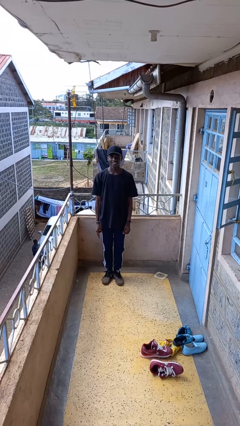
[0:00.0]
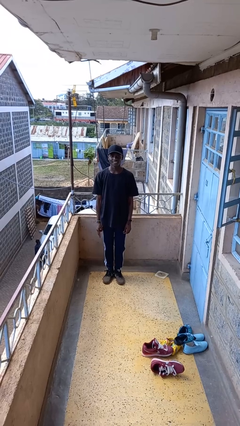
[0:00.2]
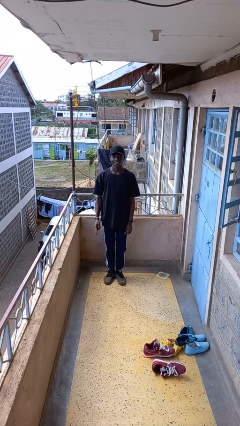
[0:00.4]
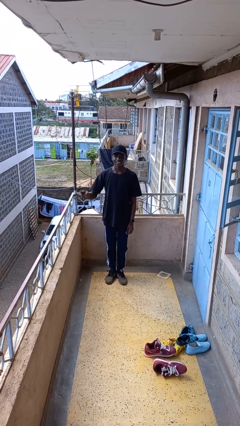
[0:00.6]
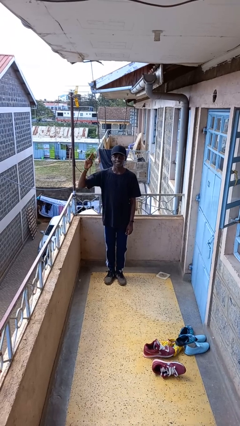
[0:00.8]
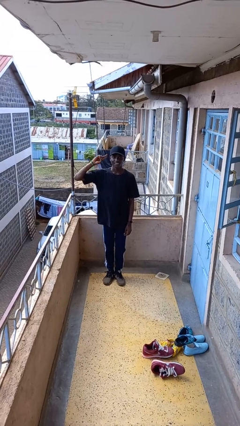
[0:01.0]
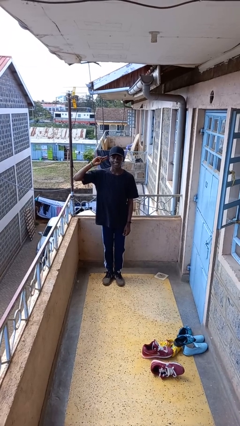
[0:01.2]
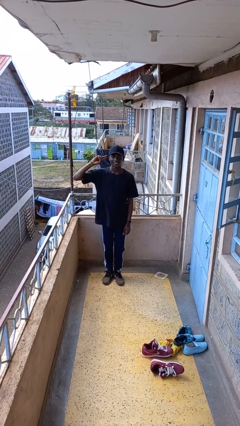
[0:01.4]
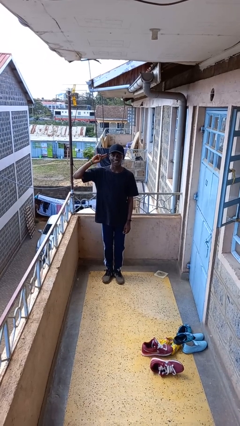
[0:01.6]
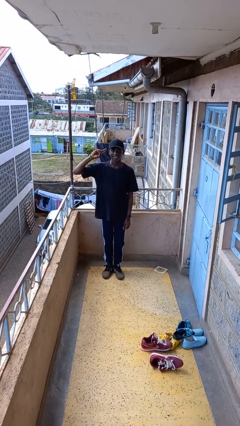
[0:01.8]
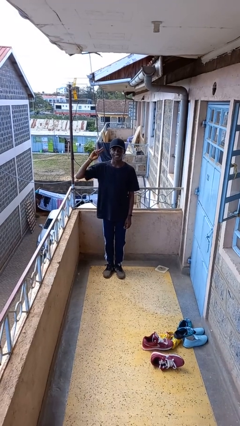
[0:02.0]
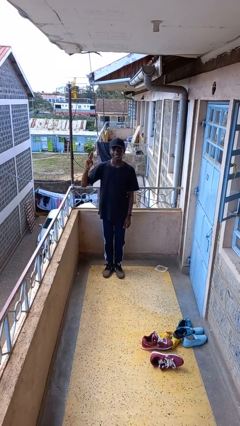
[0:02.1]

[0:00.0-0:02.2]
person salutes

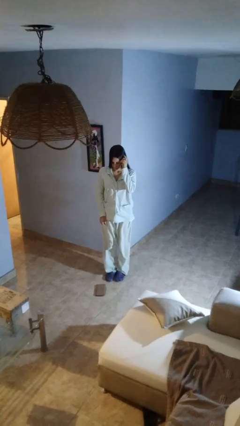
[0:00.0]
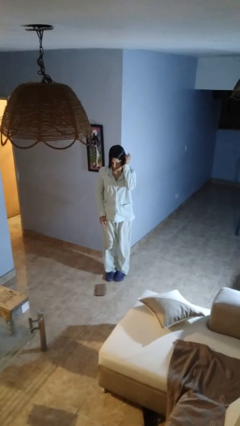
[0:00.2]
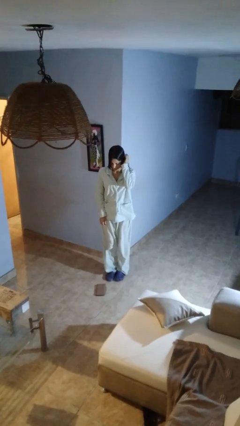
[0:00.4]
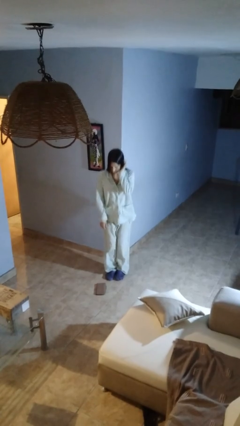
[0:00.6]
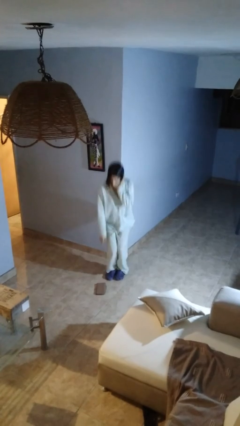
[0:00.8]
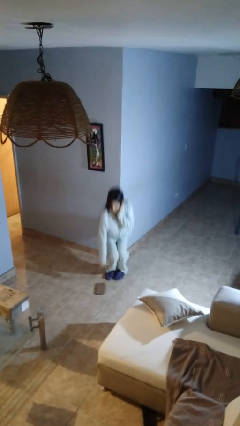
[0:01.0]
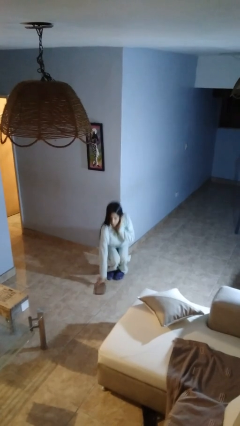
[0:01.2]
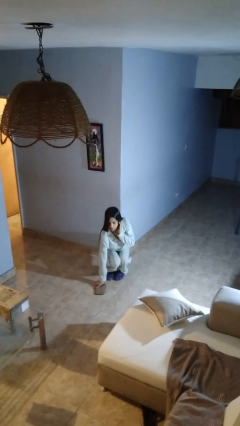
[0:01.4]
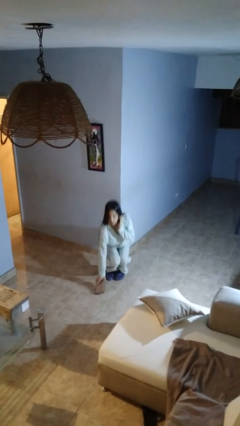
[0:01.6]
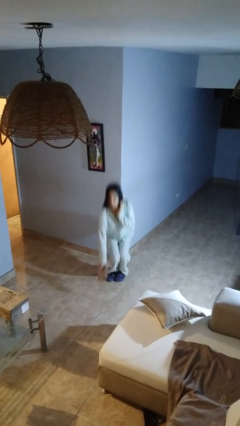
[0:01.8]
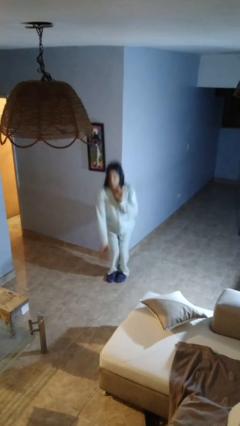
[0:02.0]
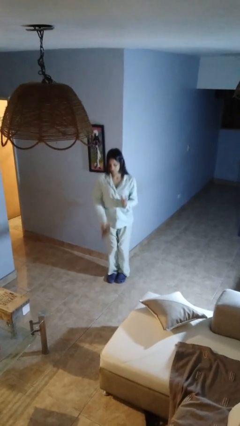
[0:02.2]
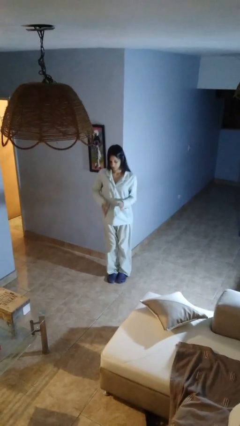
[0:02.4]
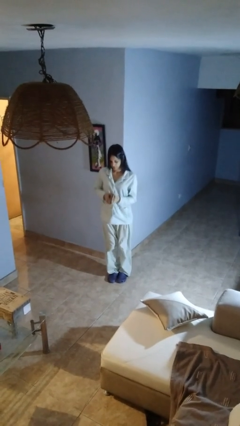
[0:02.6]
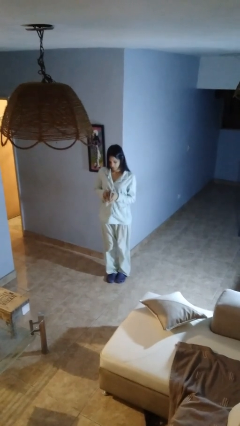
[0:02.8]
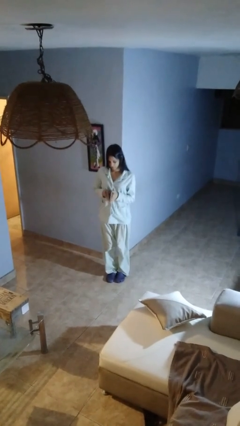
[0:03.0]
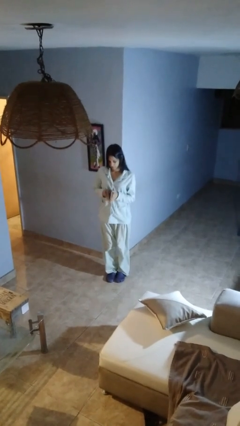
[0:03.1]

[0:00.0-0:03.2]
person picks up object from floor

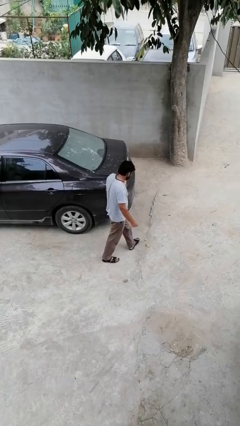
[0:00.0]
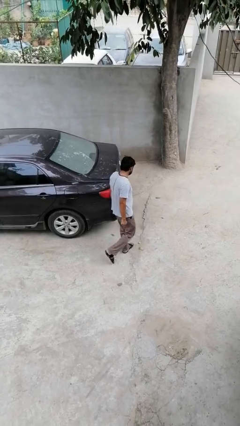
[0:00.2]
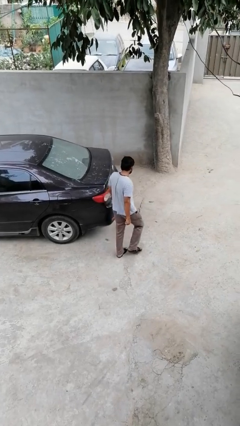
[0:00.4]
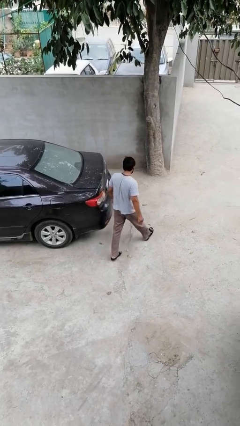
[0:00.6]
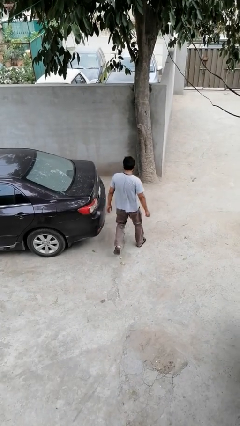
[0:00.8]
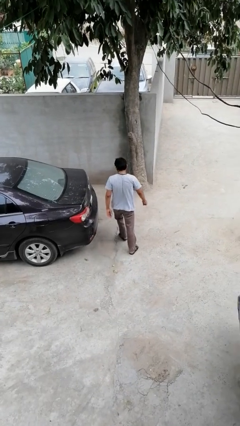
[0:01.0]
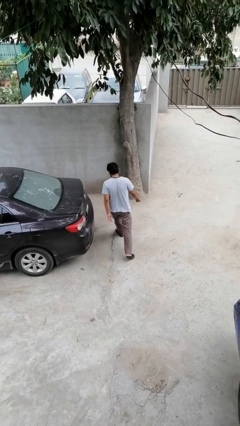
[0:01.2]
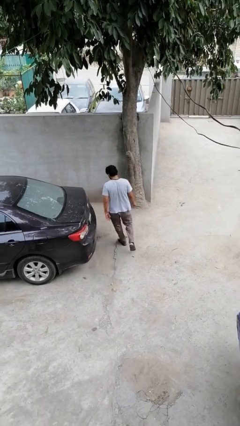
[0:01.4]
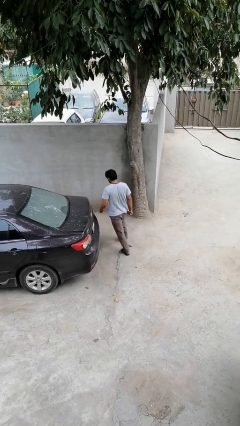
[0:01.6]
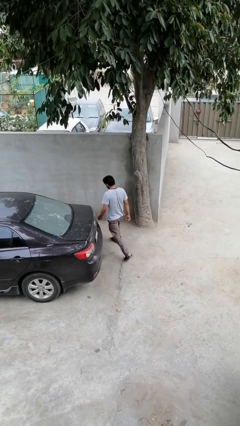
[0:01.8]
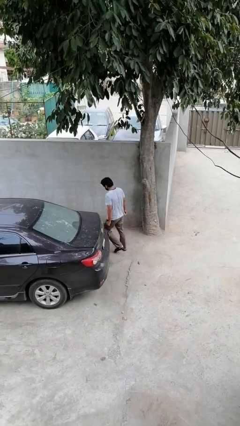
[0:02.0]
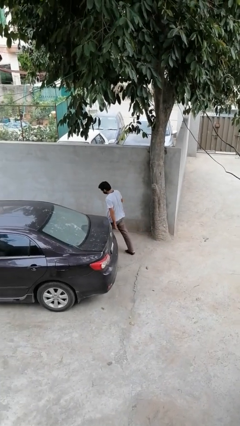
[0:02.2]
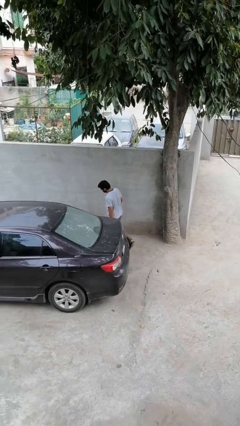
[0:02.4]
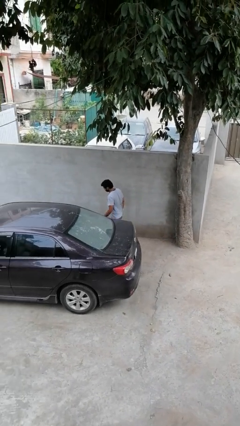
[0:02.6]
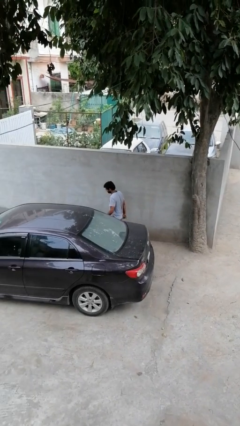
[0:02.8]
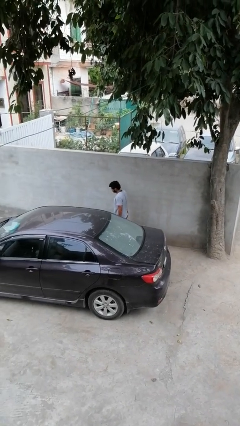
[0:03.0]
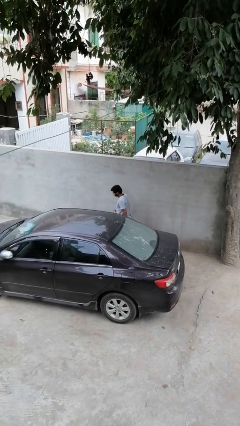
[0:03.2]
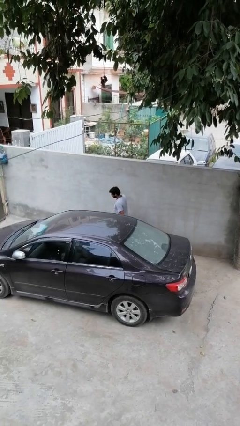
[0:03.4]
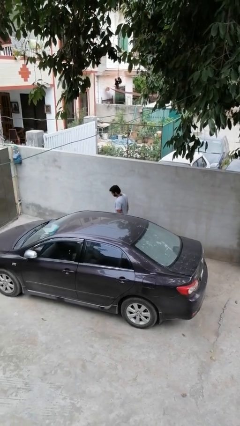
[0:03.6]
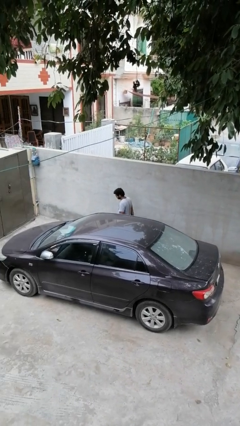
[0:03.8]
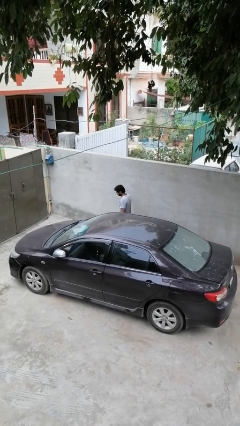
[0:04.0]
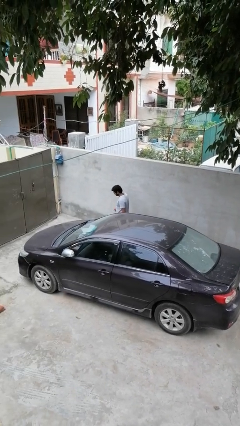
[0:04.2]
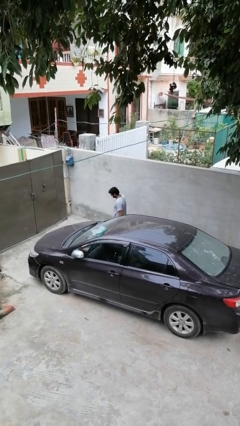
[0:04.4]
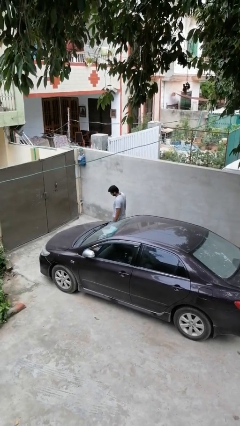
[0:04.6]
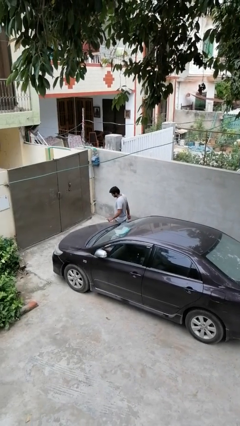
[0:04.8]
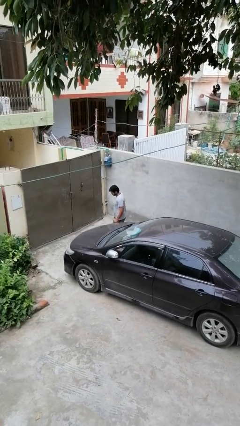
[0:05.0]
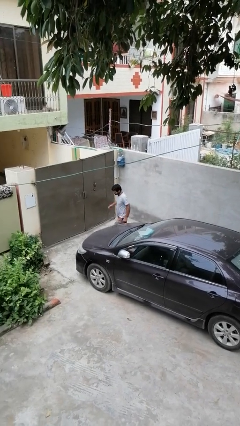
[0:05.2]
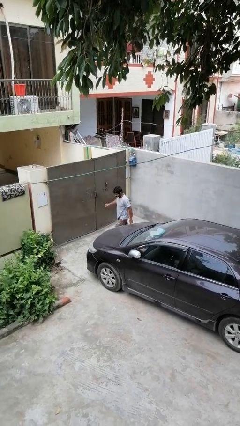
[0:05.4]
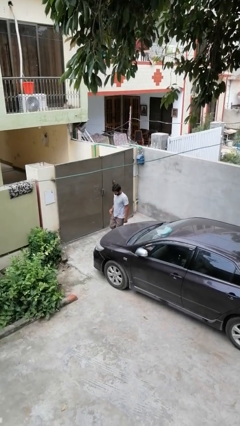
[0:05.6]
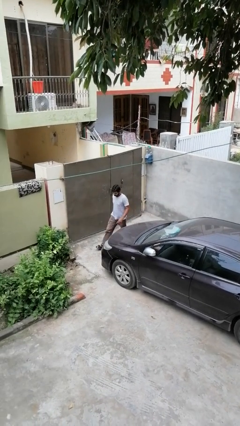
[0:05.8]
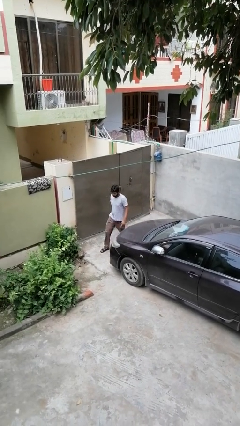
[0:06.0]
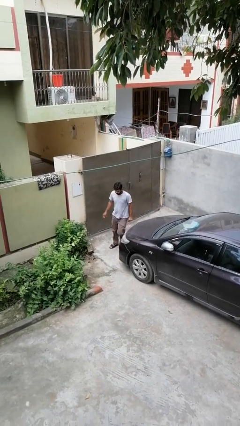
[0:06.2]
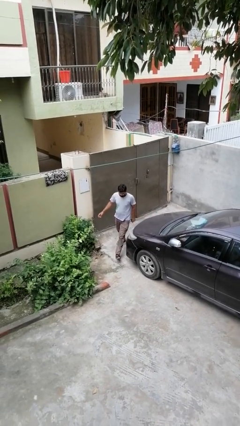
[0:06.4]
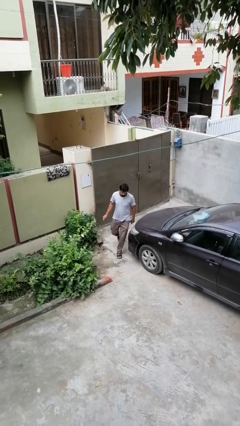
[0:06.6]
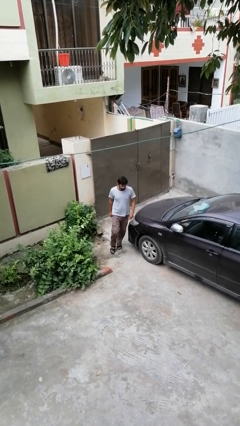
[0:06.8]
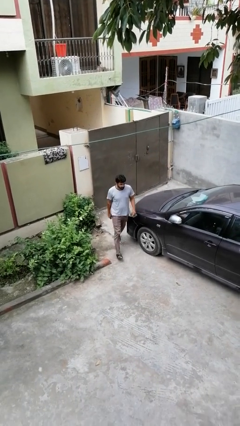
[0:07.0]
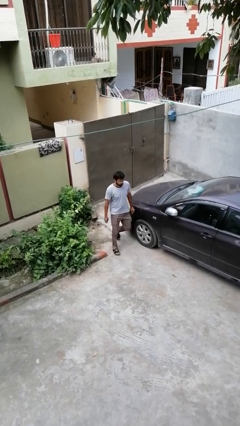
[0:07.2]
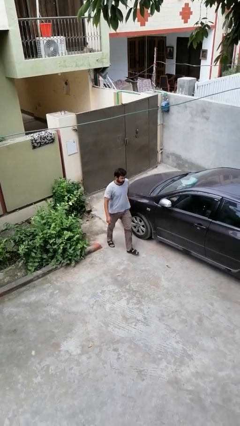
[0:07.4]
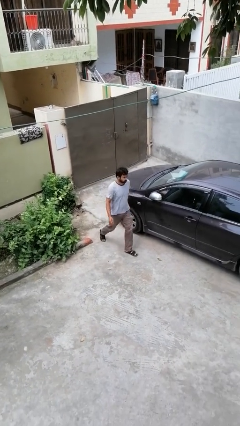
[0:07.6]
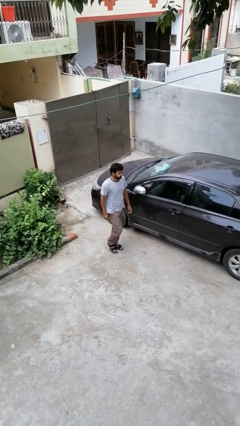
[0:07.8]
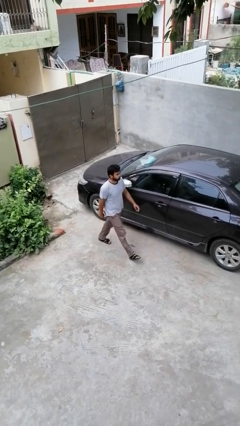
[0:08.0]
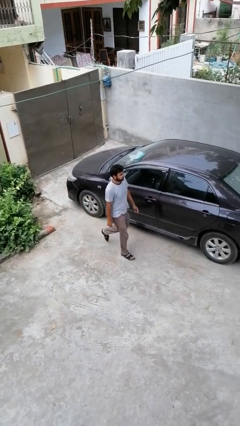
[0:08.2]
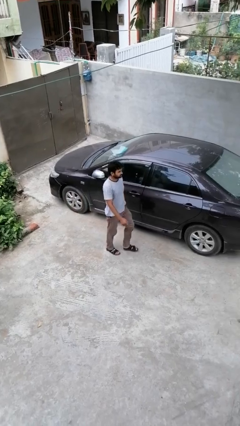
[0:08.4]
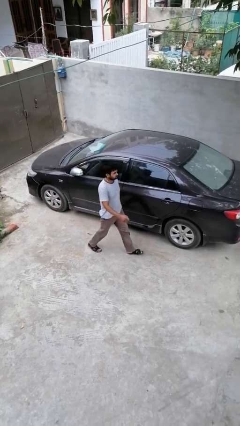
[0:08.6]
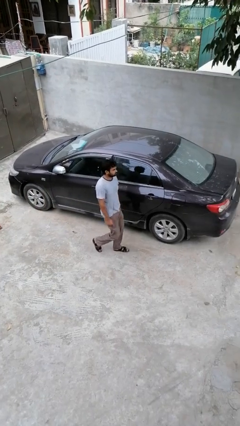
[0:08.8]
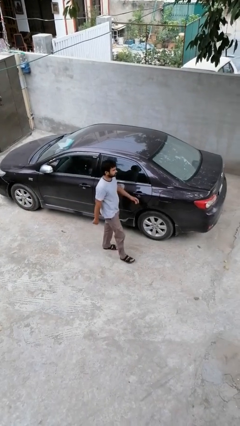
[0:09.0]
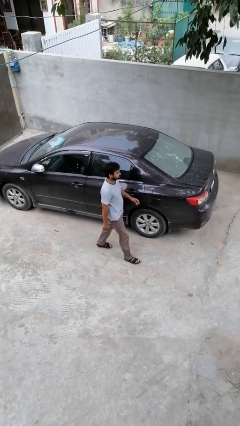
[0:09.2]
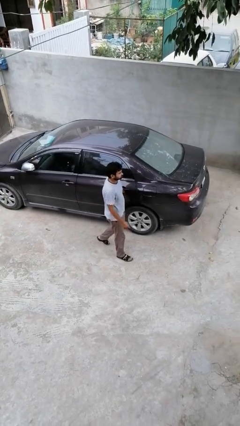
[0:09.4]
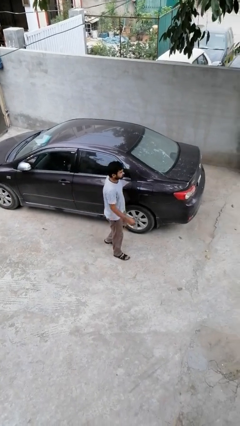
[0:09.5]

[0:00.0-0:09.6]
person walks around car

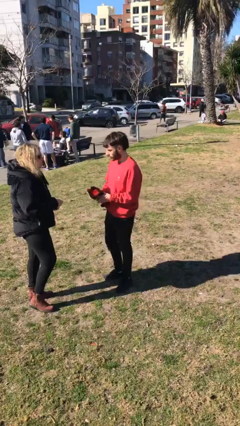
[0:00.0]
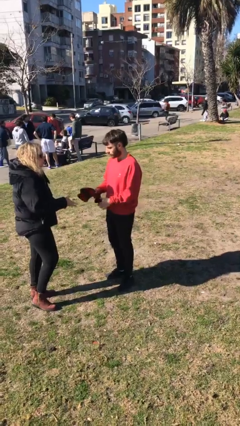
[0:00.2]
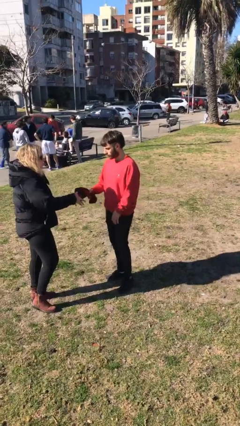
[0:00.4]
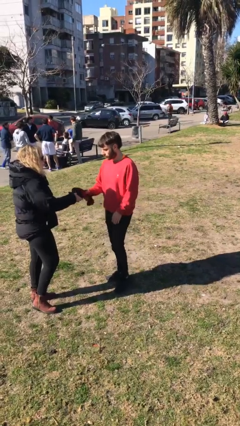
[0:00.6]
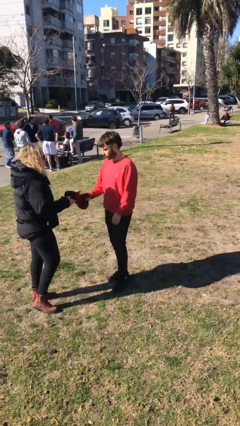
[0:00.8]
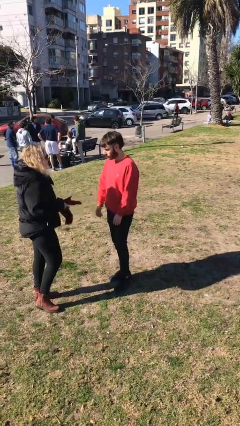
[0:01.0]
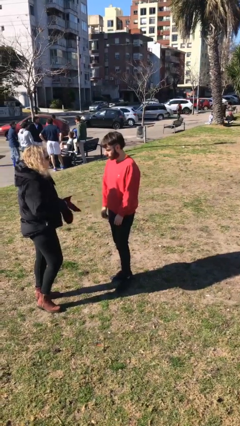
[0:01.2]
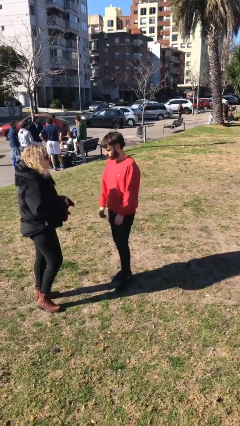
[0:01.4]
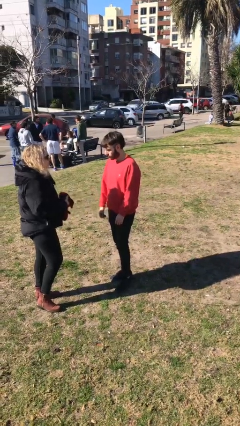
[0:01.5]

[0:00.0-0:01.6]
person transfers object to person

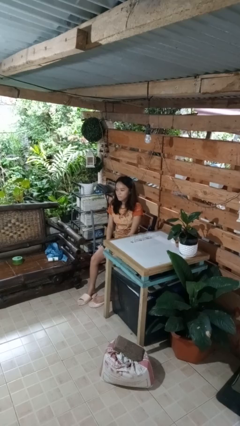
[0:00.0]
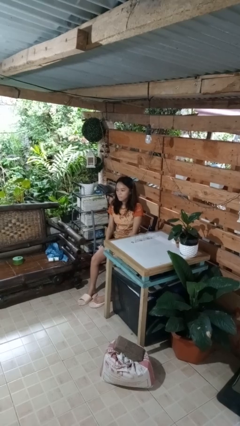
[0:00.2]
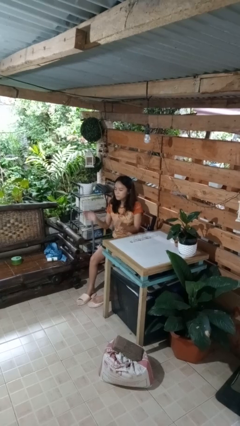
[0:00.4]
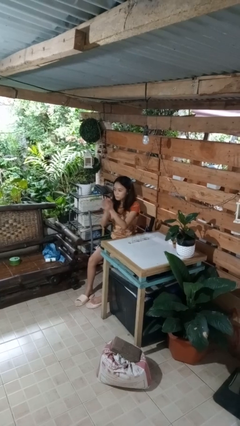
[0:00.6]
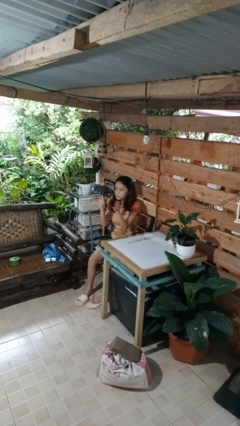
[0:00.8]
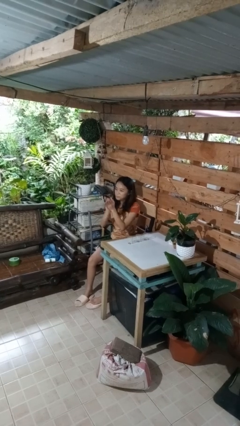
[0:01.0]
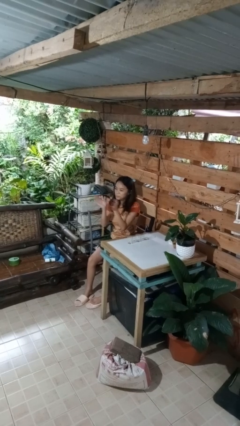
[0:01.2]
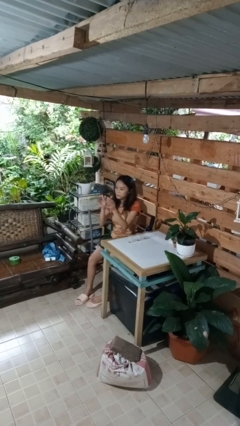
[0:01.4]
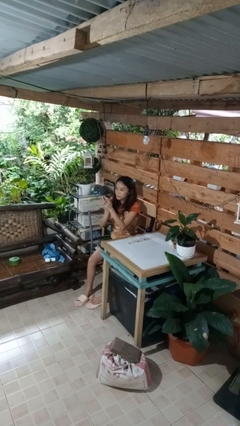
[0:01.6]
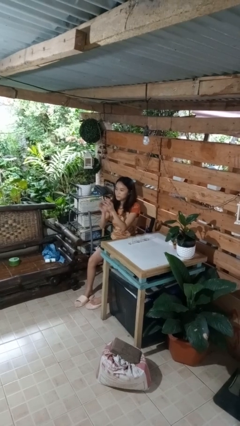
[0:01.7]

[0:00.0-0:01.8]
person claps hands
